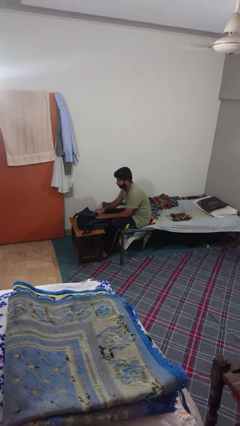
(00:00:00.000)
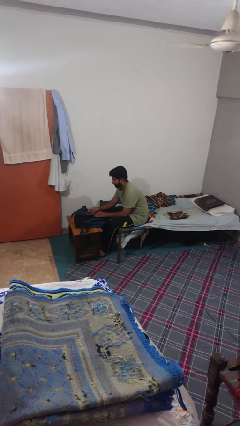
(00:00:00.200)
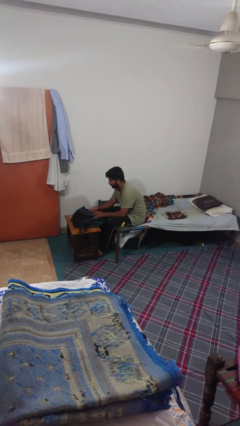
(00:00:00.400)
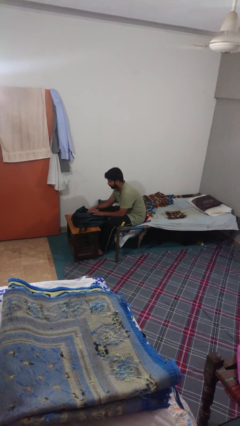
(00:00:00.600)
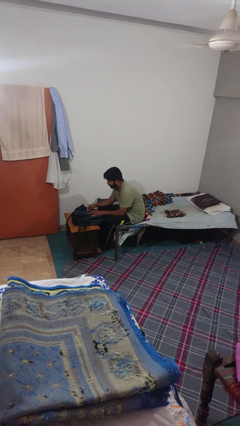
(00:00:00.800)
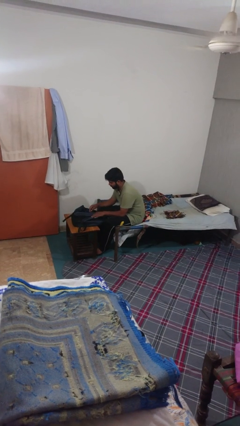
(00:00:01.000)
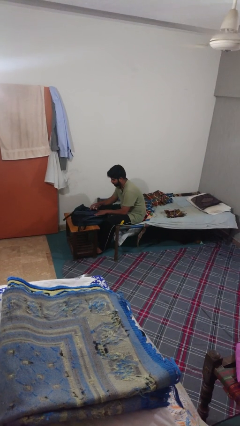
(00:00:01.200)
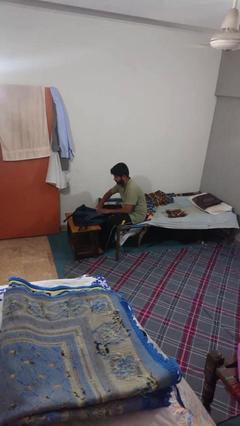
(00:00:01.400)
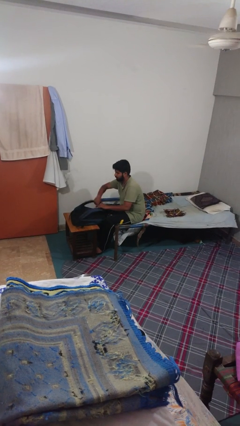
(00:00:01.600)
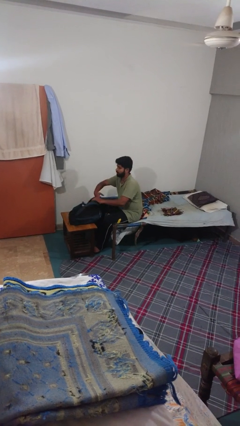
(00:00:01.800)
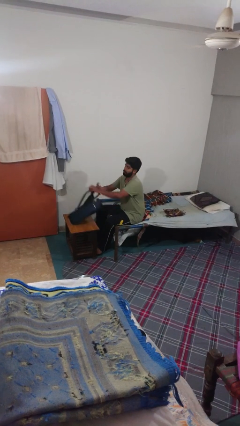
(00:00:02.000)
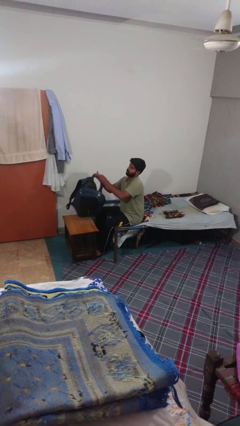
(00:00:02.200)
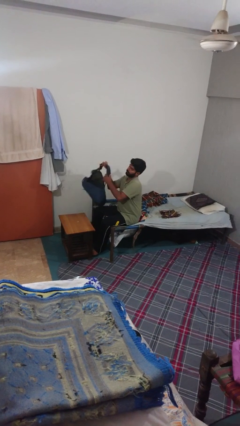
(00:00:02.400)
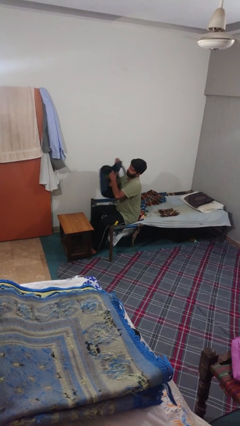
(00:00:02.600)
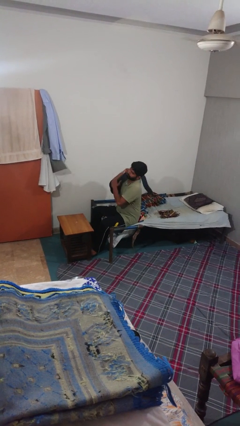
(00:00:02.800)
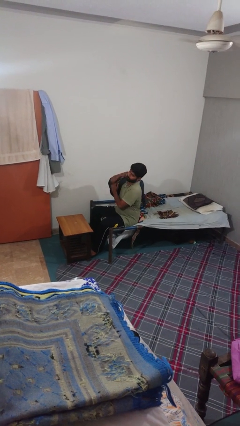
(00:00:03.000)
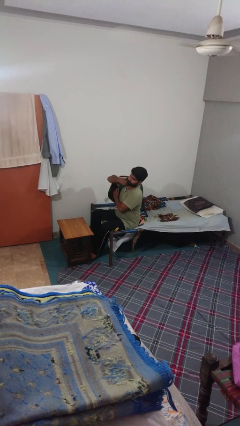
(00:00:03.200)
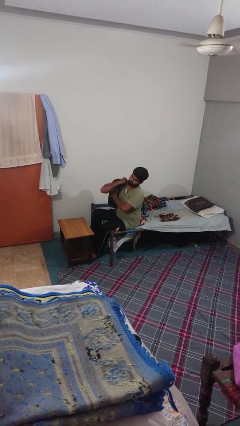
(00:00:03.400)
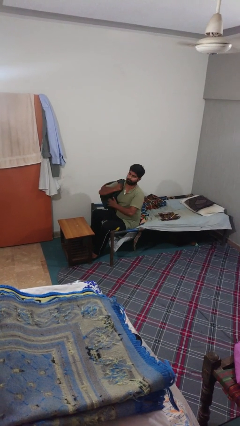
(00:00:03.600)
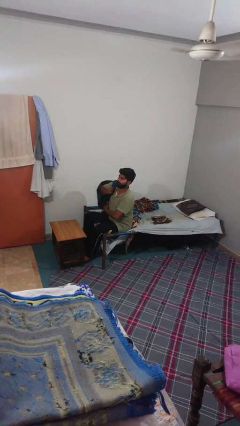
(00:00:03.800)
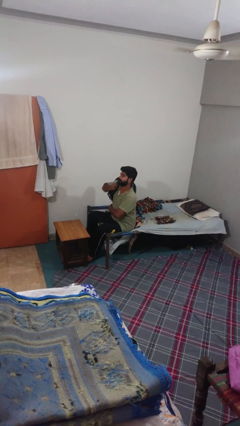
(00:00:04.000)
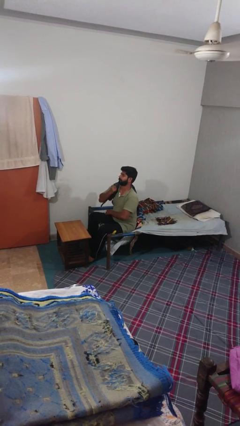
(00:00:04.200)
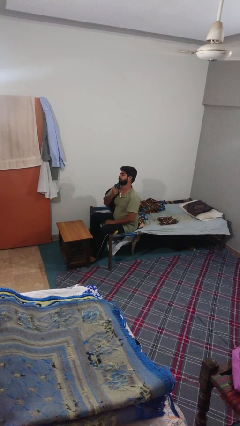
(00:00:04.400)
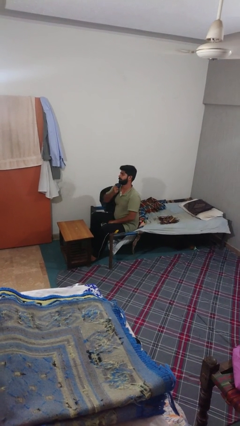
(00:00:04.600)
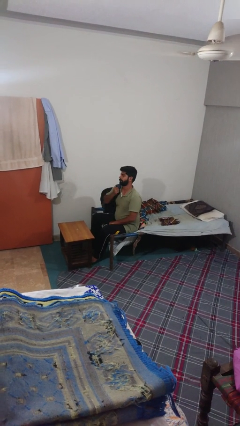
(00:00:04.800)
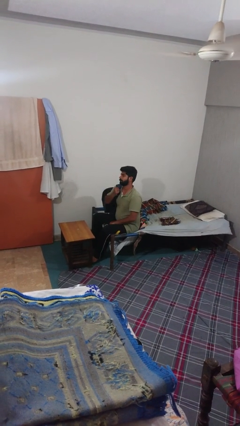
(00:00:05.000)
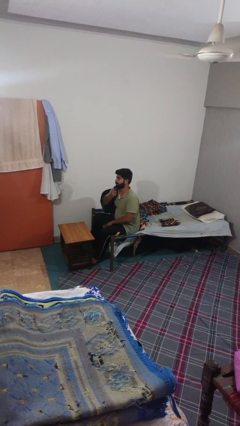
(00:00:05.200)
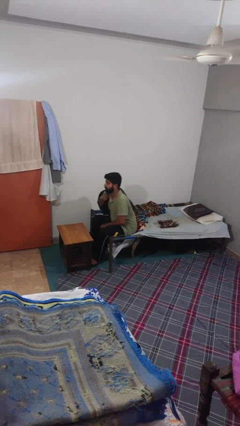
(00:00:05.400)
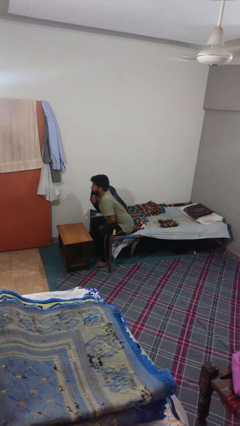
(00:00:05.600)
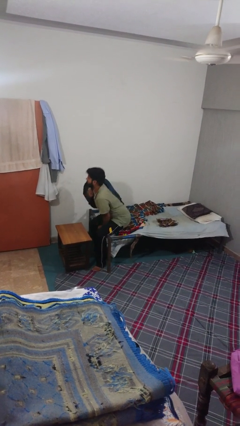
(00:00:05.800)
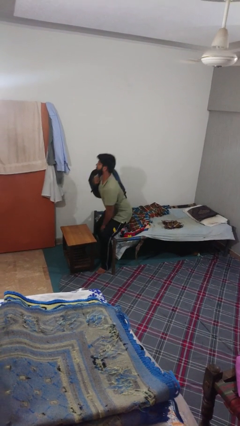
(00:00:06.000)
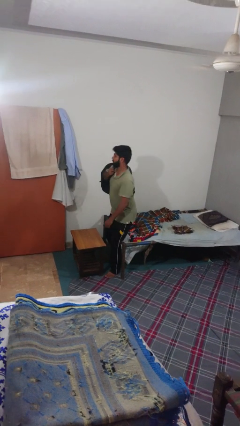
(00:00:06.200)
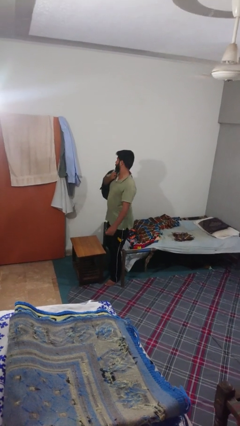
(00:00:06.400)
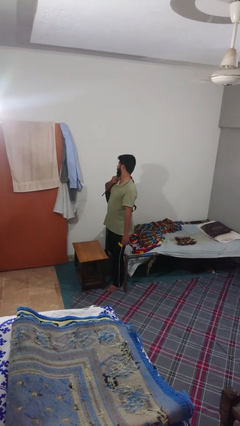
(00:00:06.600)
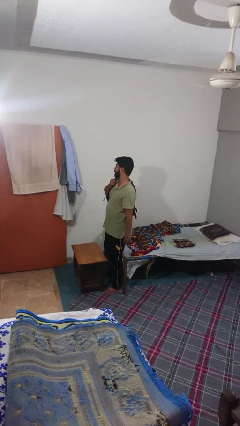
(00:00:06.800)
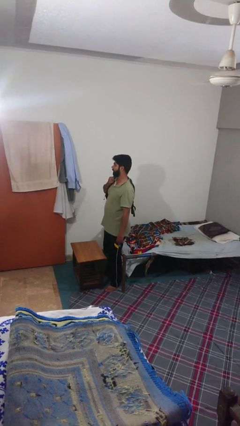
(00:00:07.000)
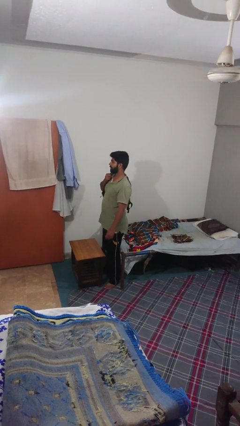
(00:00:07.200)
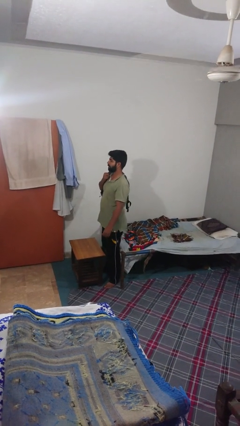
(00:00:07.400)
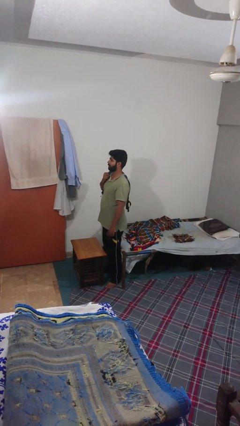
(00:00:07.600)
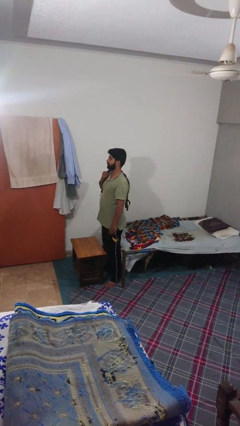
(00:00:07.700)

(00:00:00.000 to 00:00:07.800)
person puts on backpack

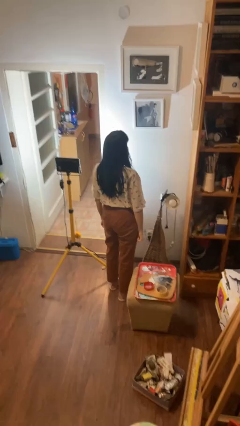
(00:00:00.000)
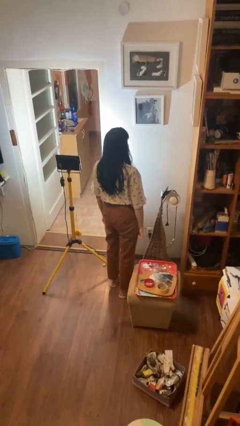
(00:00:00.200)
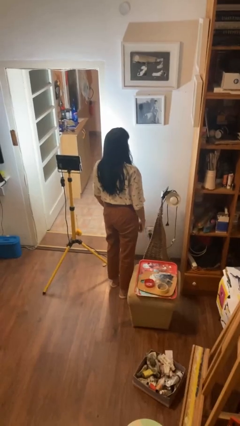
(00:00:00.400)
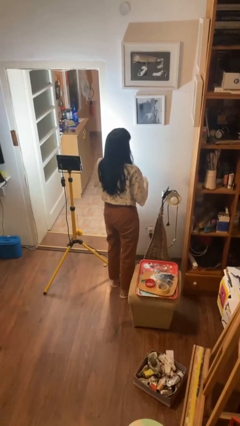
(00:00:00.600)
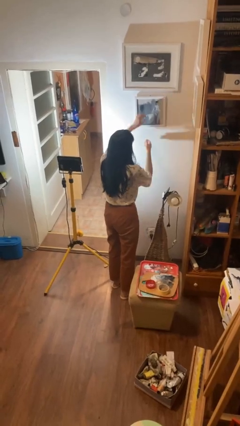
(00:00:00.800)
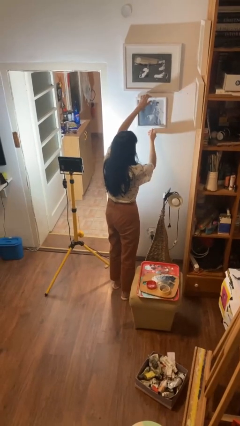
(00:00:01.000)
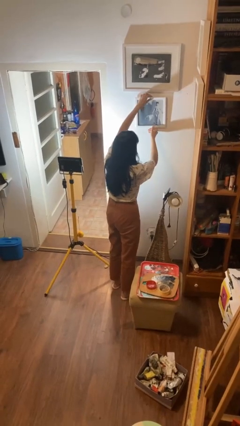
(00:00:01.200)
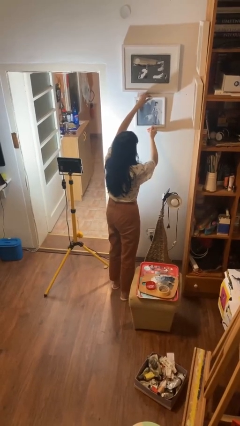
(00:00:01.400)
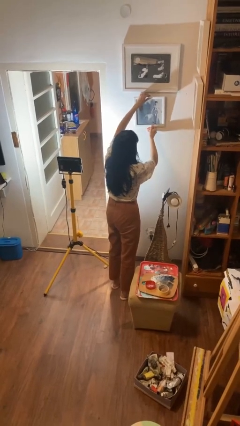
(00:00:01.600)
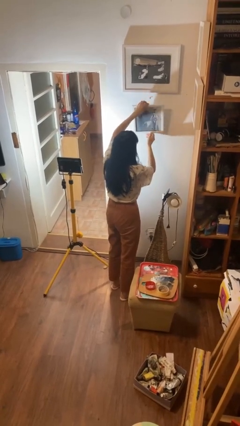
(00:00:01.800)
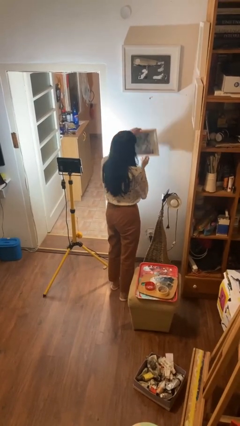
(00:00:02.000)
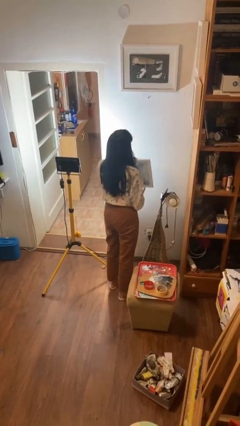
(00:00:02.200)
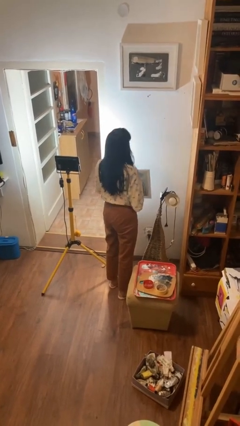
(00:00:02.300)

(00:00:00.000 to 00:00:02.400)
person takes down picture frame

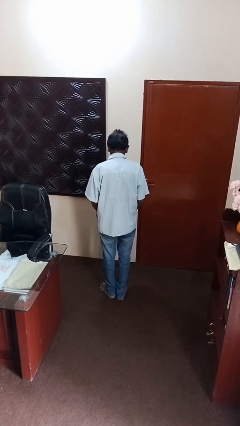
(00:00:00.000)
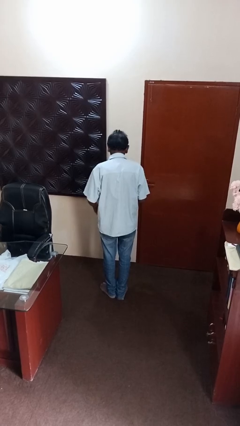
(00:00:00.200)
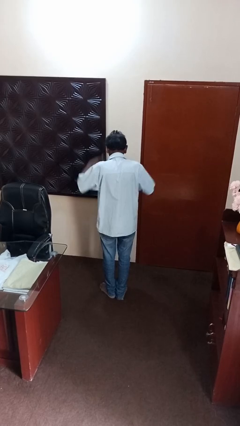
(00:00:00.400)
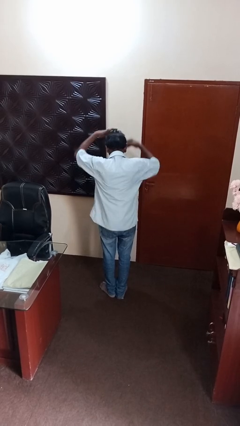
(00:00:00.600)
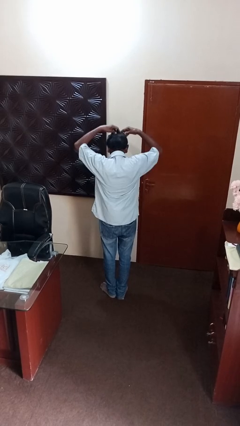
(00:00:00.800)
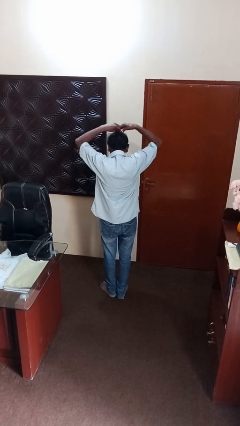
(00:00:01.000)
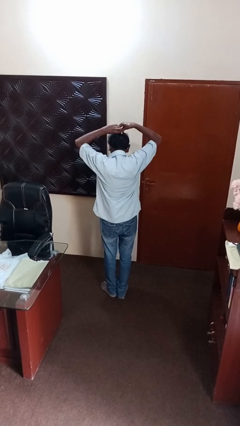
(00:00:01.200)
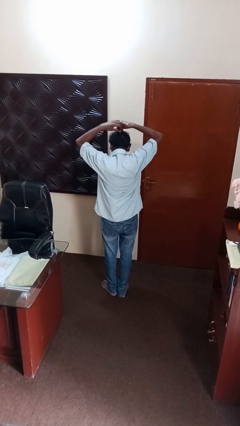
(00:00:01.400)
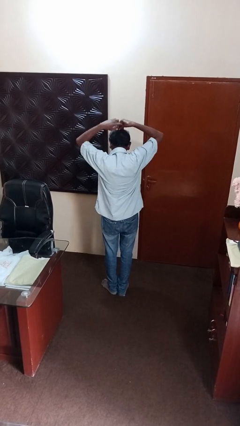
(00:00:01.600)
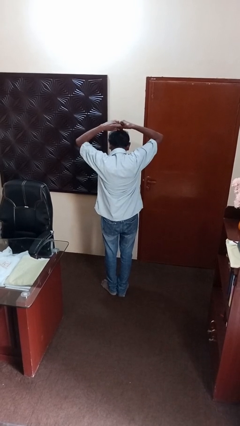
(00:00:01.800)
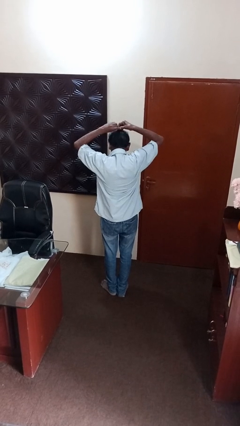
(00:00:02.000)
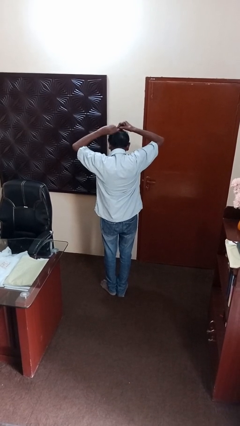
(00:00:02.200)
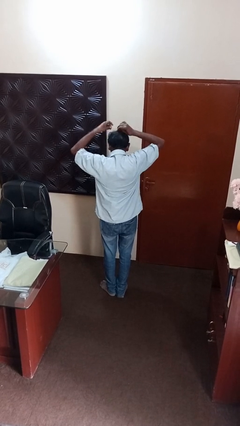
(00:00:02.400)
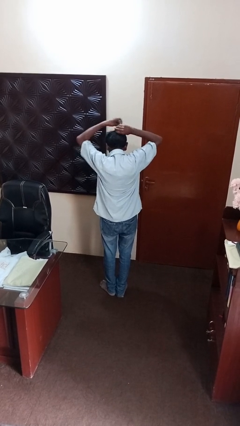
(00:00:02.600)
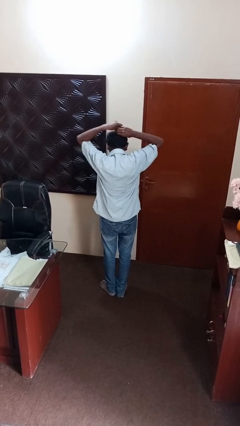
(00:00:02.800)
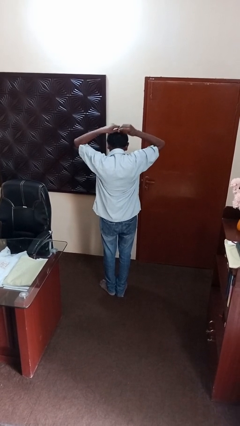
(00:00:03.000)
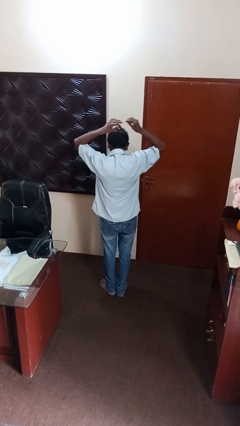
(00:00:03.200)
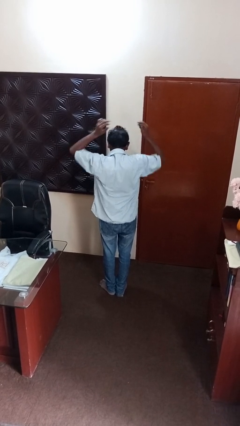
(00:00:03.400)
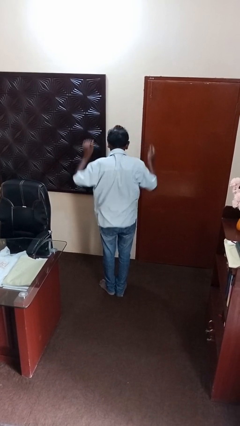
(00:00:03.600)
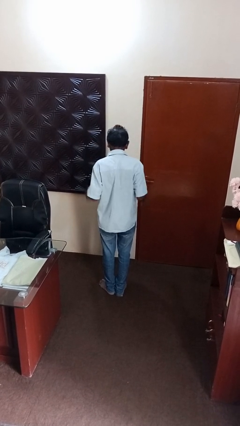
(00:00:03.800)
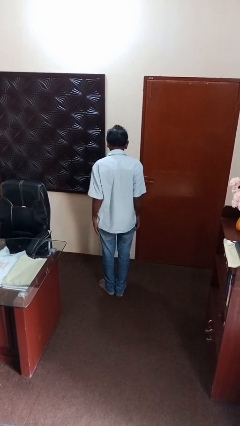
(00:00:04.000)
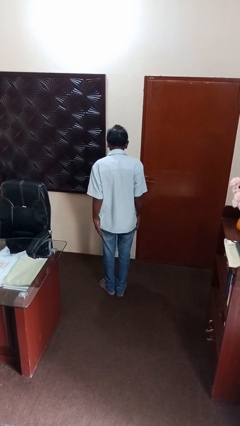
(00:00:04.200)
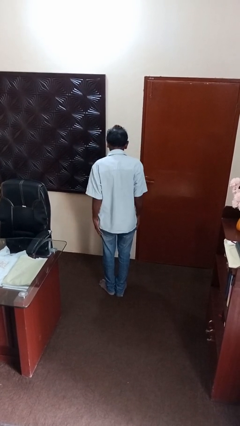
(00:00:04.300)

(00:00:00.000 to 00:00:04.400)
person puts hair in ponytail

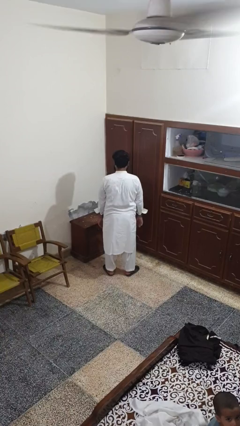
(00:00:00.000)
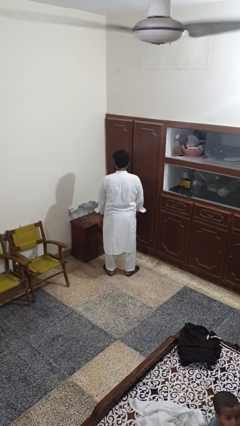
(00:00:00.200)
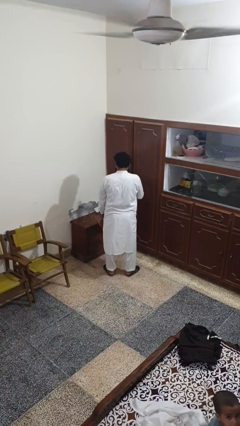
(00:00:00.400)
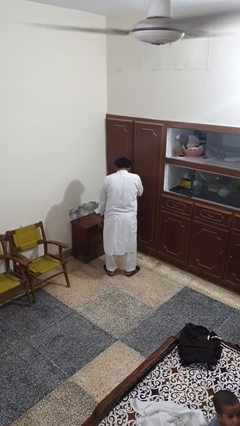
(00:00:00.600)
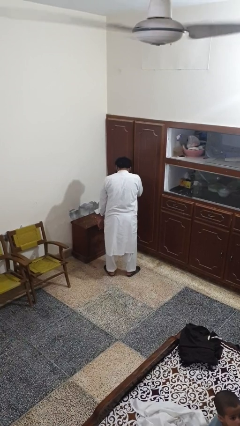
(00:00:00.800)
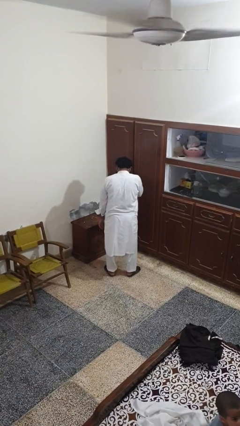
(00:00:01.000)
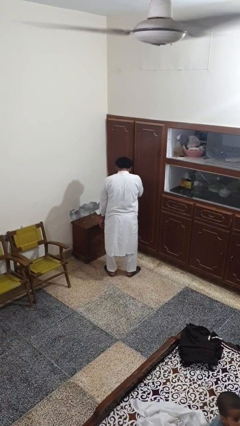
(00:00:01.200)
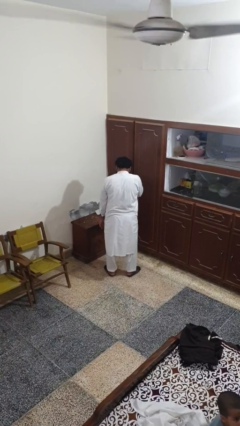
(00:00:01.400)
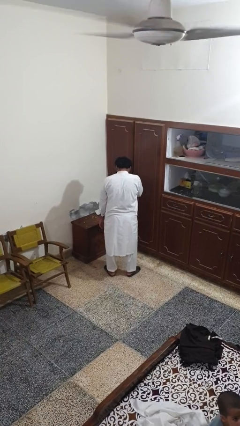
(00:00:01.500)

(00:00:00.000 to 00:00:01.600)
person sneezes into hand

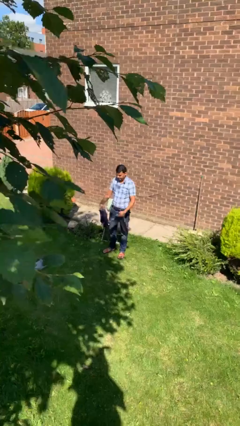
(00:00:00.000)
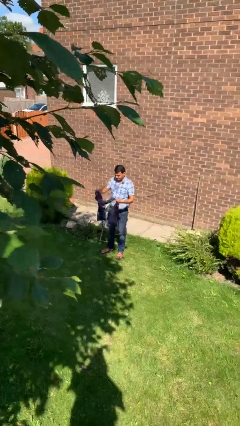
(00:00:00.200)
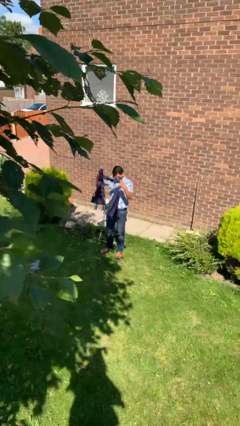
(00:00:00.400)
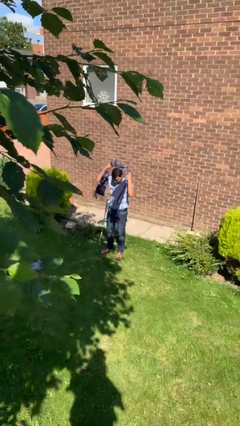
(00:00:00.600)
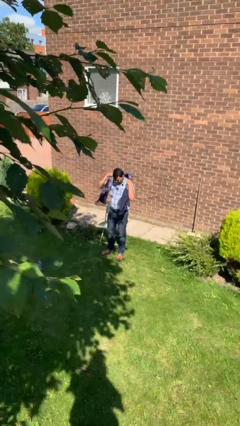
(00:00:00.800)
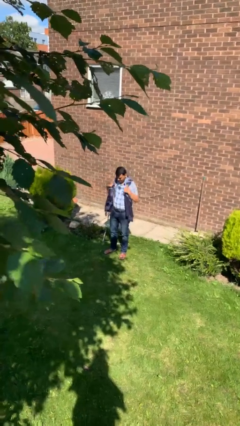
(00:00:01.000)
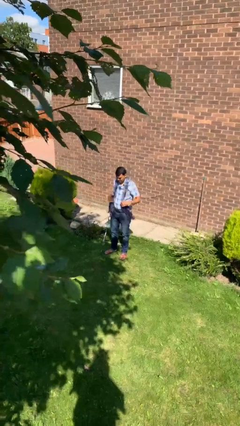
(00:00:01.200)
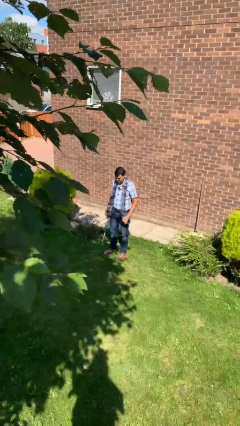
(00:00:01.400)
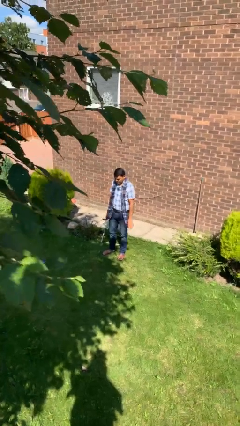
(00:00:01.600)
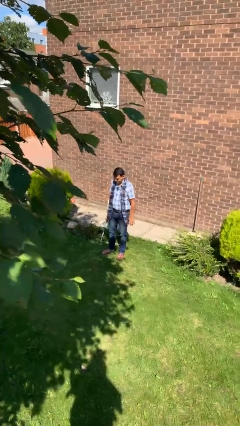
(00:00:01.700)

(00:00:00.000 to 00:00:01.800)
person puts on scarf
